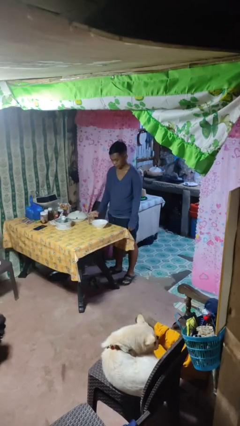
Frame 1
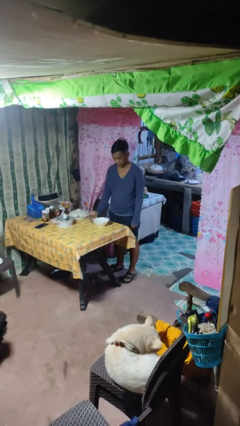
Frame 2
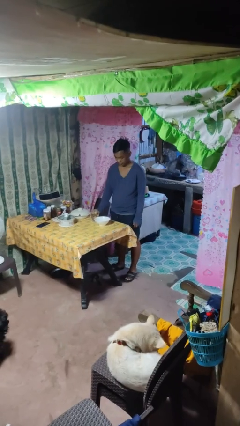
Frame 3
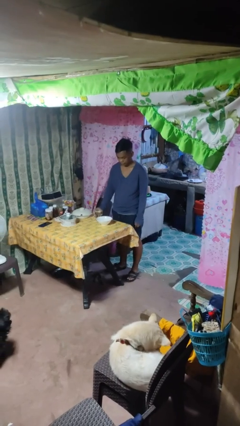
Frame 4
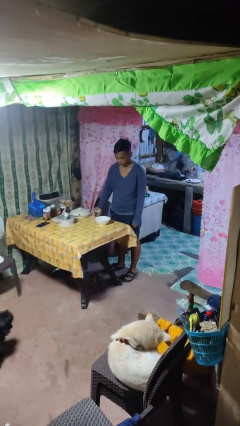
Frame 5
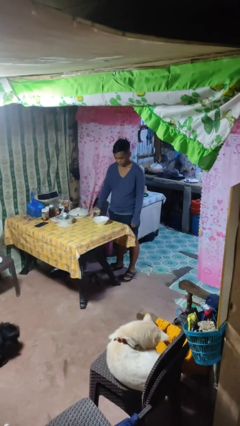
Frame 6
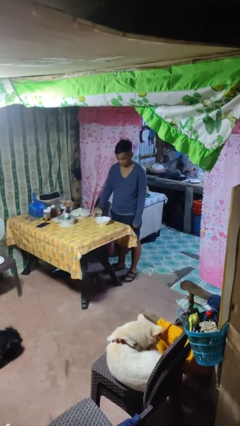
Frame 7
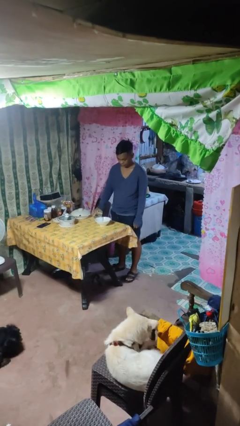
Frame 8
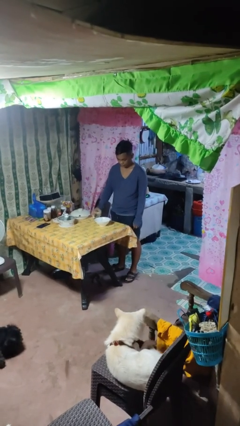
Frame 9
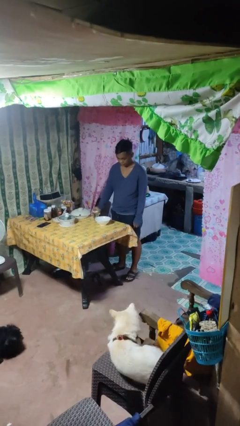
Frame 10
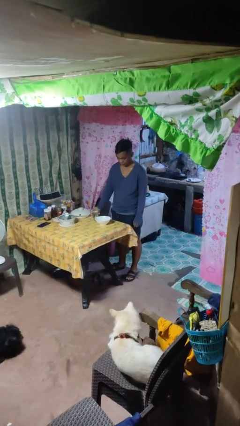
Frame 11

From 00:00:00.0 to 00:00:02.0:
person pours into bowl

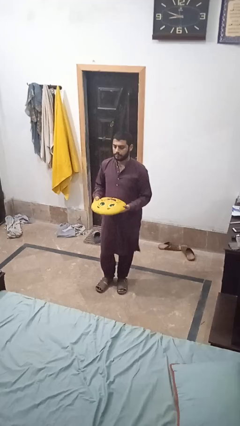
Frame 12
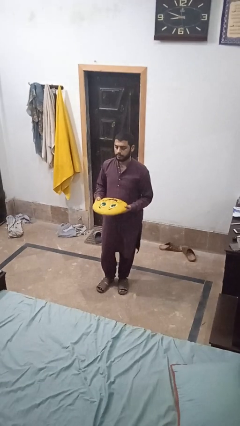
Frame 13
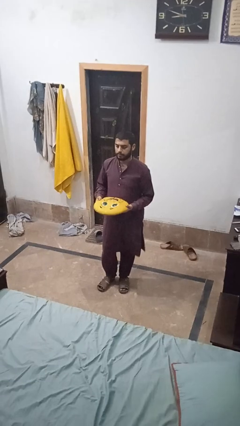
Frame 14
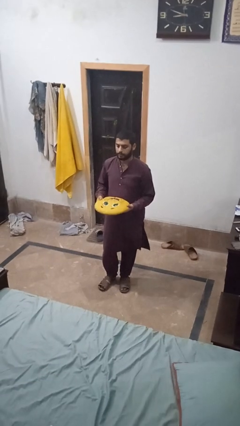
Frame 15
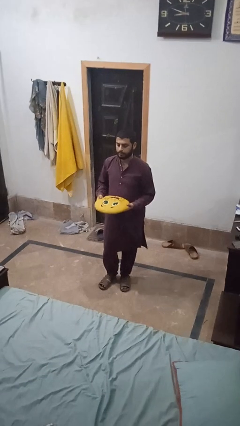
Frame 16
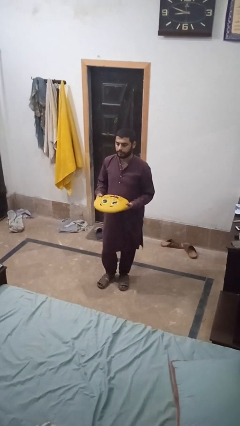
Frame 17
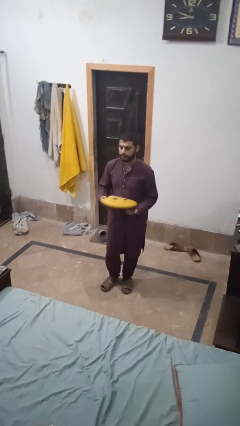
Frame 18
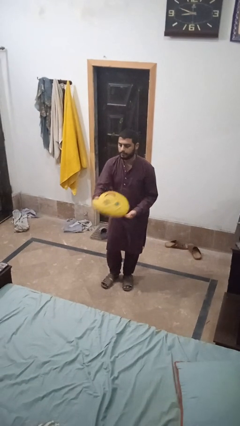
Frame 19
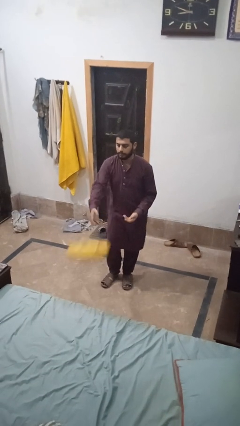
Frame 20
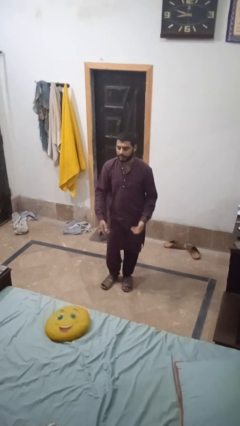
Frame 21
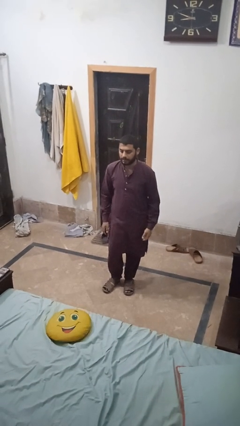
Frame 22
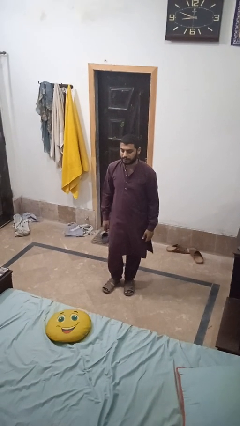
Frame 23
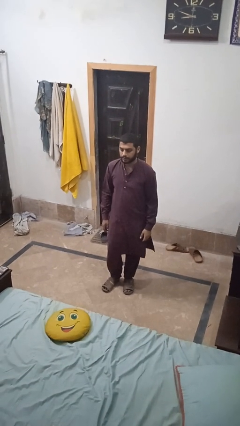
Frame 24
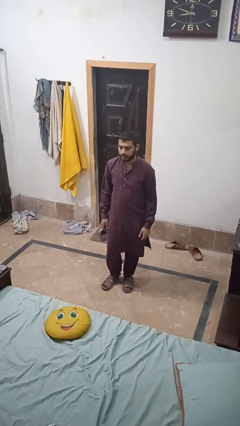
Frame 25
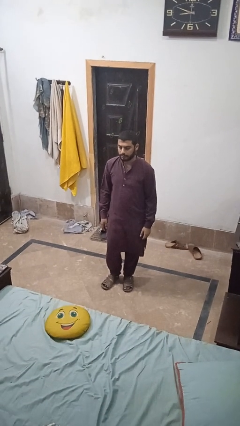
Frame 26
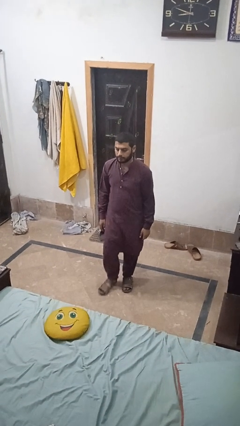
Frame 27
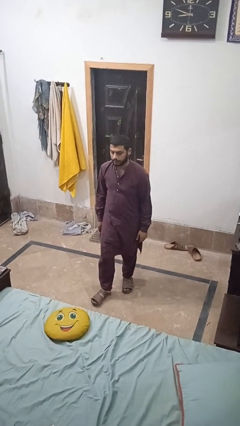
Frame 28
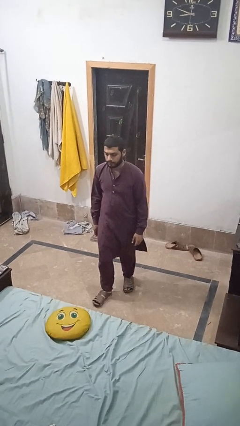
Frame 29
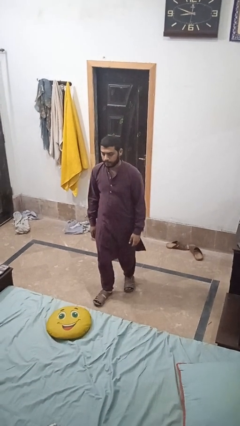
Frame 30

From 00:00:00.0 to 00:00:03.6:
person throws object on bed

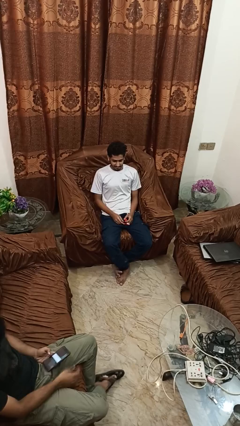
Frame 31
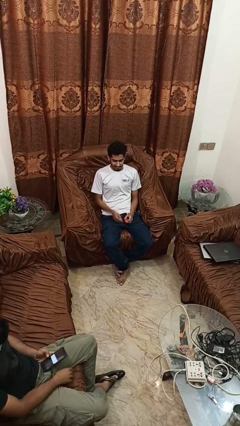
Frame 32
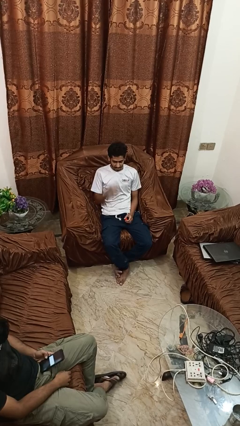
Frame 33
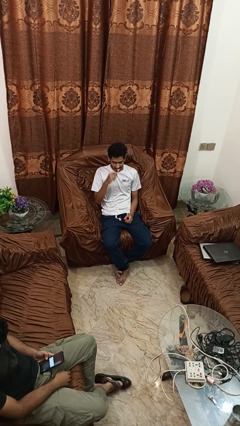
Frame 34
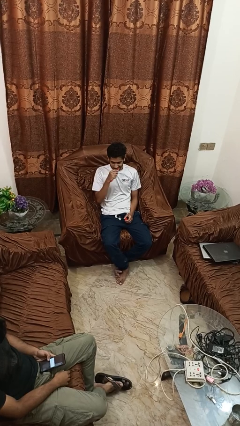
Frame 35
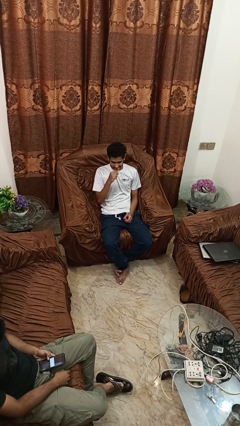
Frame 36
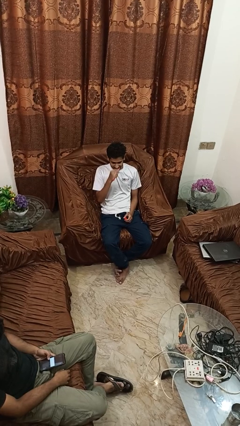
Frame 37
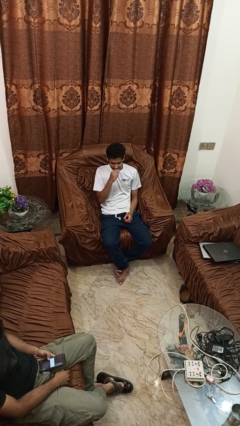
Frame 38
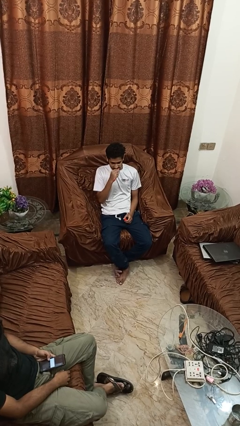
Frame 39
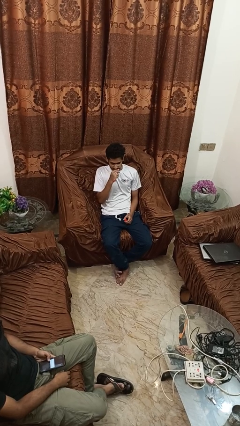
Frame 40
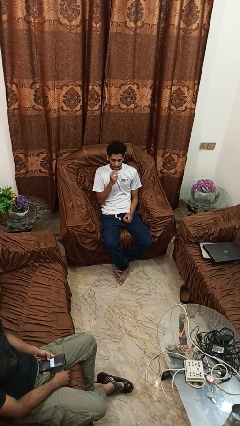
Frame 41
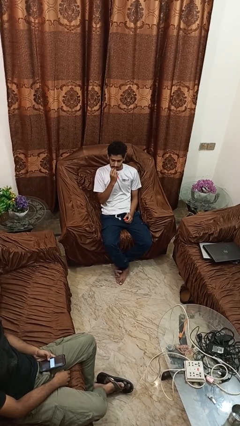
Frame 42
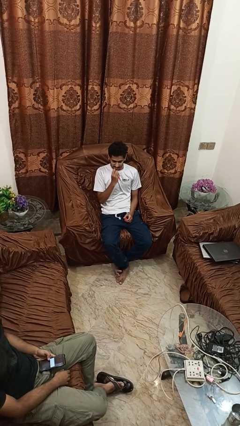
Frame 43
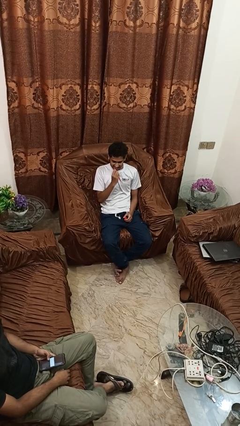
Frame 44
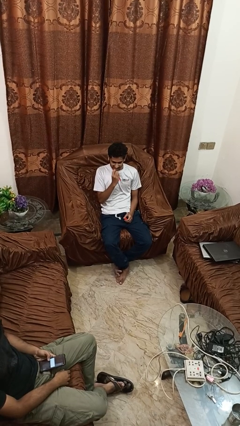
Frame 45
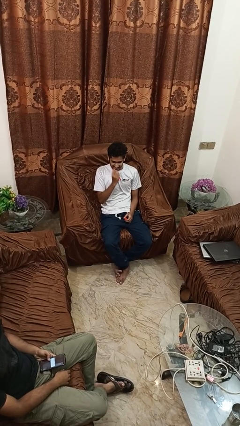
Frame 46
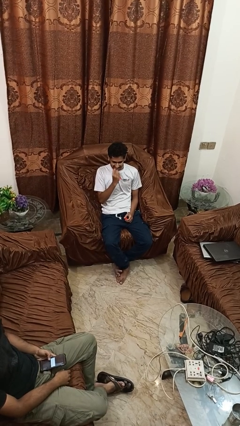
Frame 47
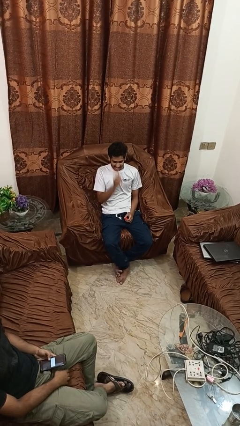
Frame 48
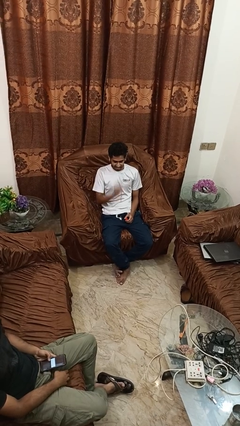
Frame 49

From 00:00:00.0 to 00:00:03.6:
person brushes teeth

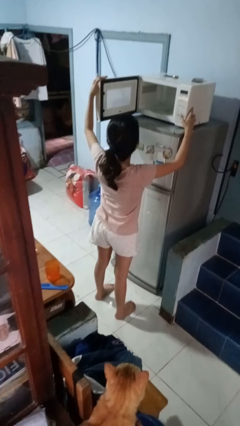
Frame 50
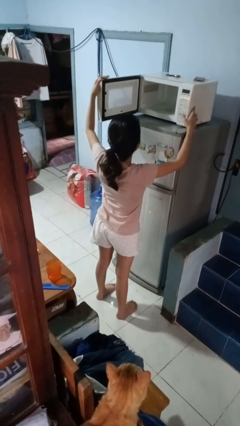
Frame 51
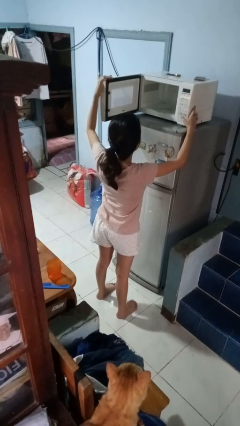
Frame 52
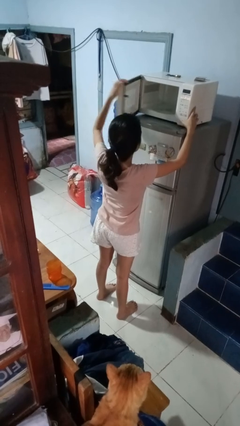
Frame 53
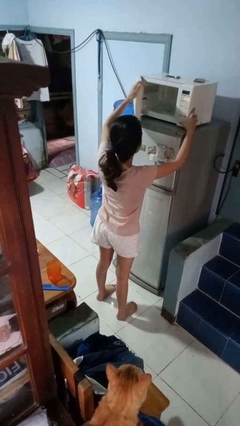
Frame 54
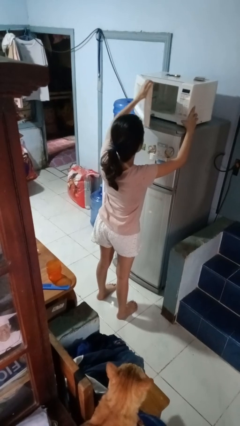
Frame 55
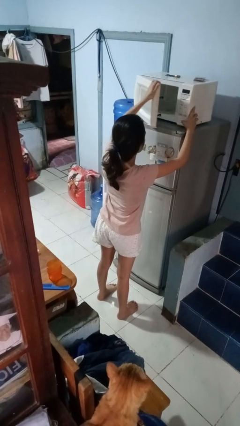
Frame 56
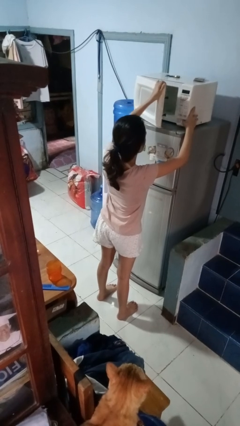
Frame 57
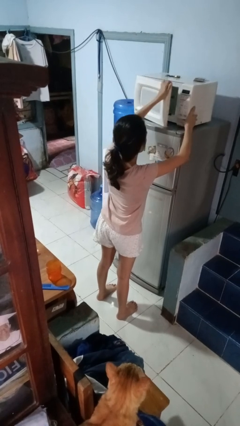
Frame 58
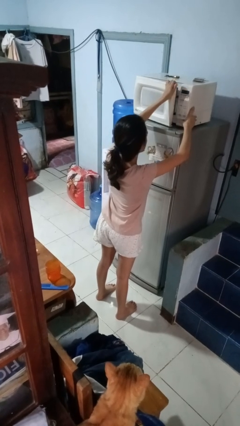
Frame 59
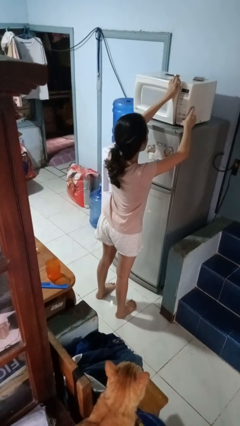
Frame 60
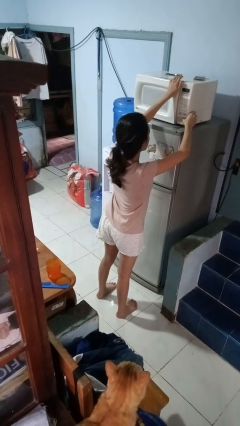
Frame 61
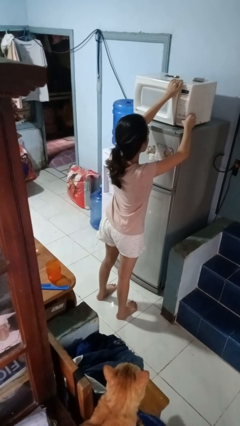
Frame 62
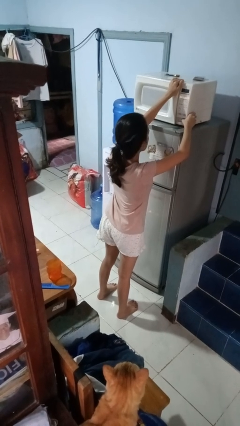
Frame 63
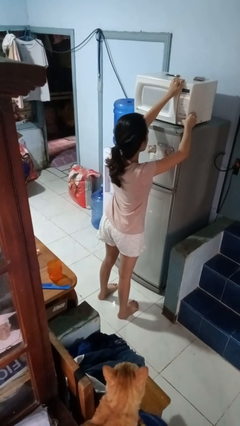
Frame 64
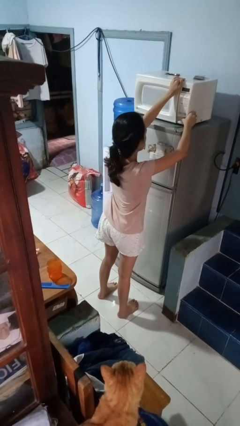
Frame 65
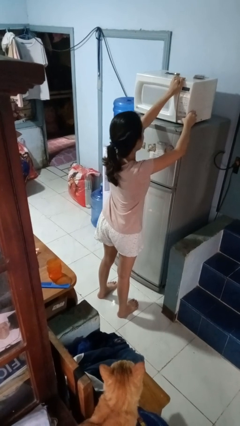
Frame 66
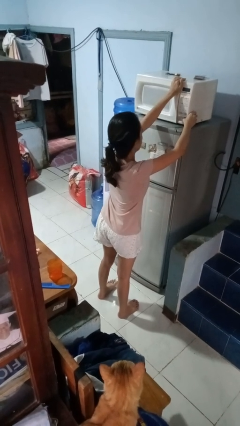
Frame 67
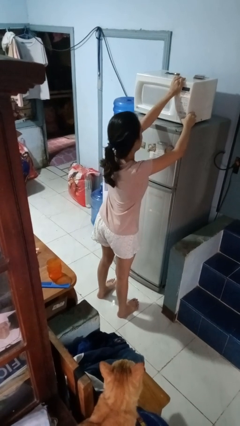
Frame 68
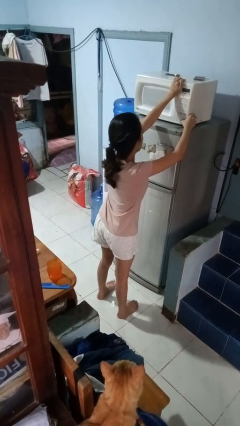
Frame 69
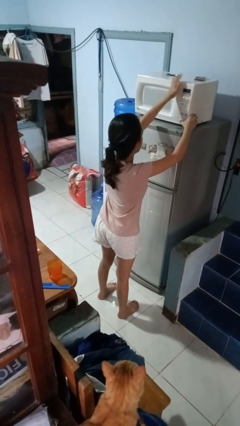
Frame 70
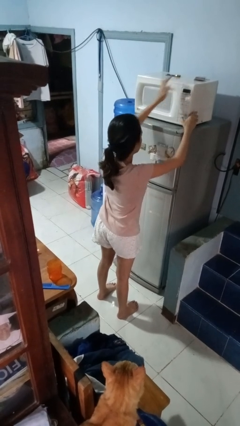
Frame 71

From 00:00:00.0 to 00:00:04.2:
person closes microwave

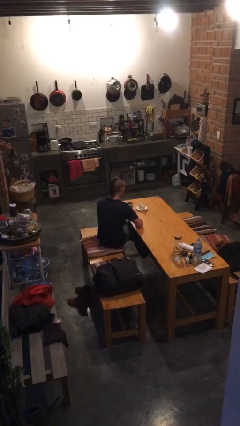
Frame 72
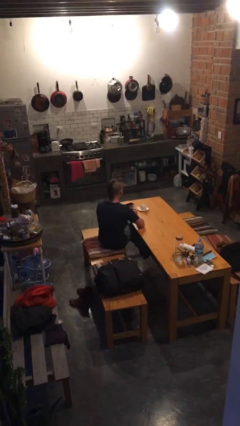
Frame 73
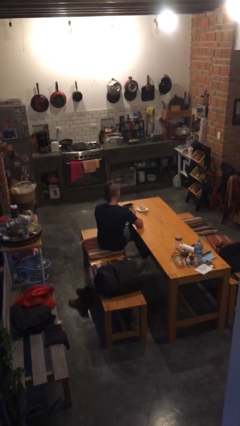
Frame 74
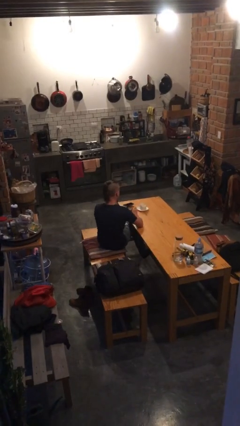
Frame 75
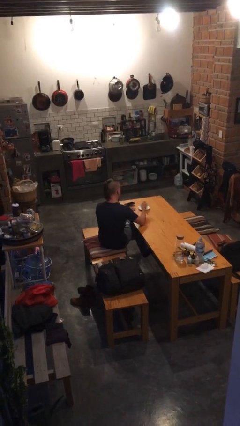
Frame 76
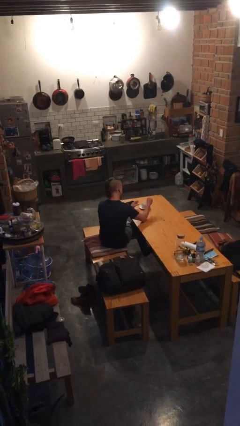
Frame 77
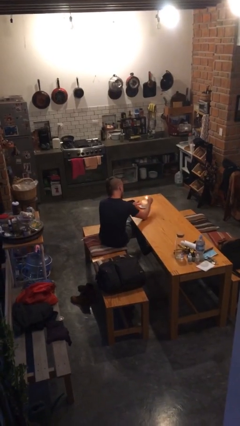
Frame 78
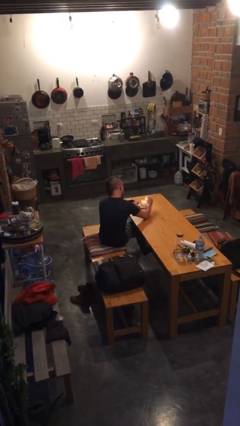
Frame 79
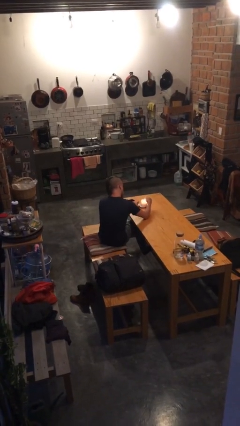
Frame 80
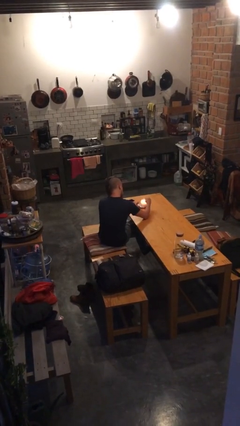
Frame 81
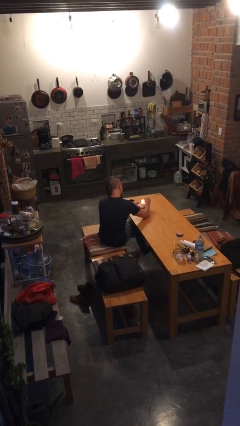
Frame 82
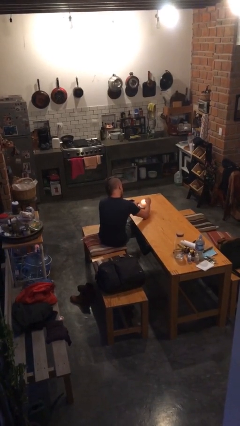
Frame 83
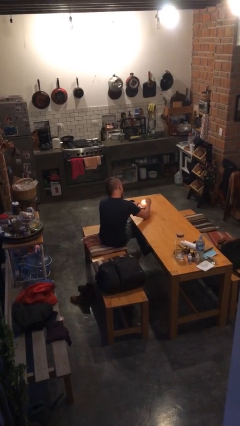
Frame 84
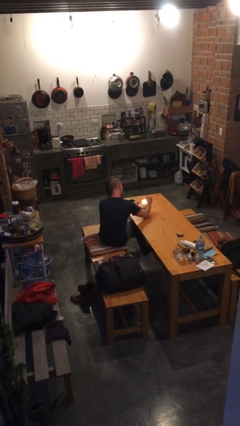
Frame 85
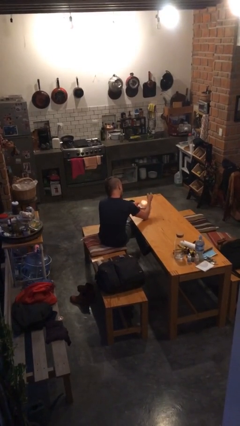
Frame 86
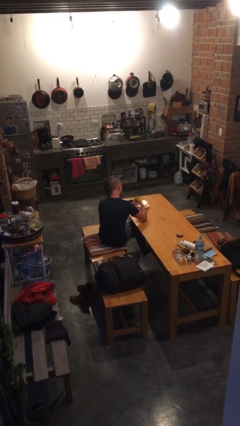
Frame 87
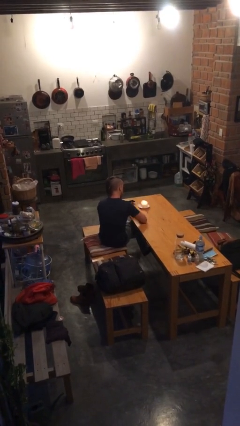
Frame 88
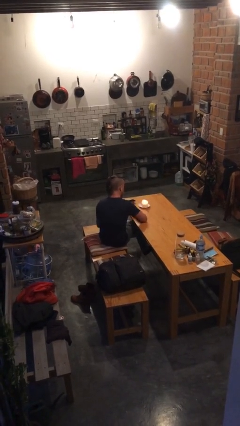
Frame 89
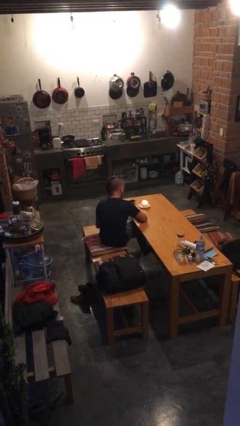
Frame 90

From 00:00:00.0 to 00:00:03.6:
person lights candle

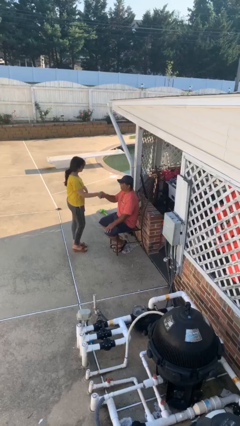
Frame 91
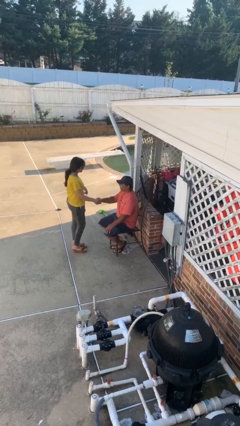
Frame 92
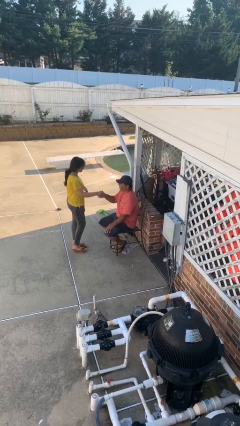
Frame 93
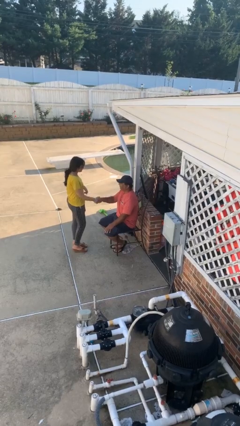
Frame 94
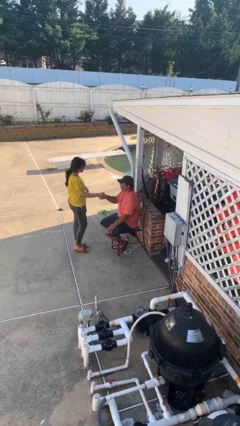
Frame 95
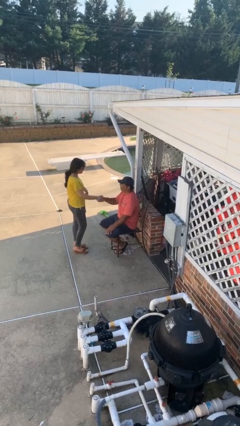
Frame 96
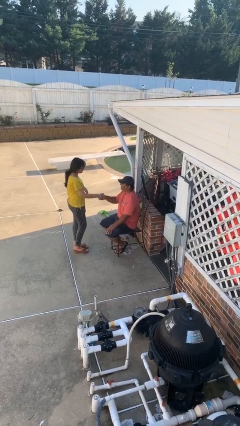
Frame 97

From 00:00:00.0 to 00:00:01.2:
person shakes hand
